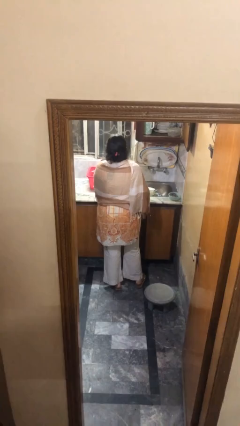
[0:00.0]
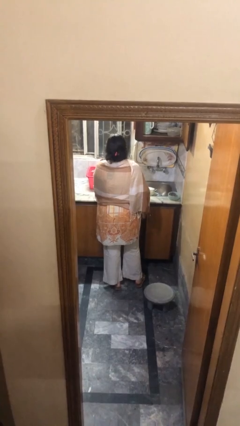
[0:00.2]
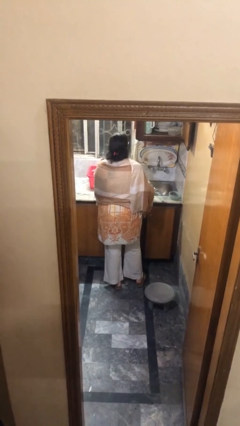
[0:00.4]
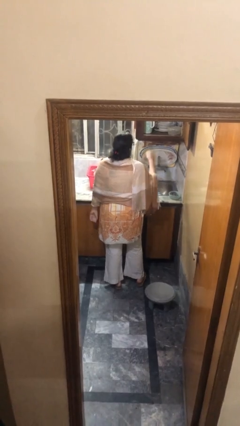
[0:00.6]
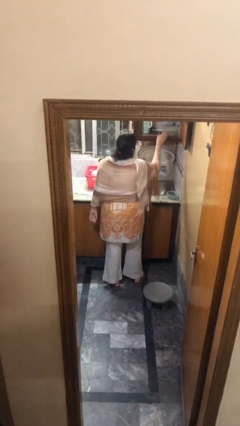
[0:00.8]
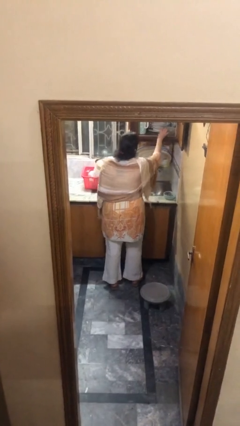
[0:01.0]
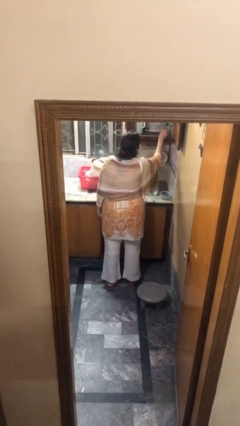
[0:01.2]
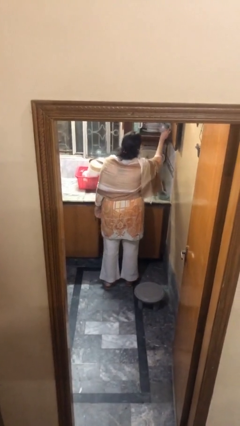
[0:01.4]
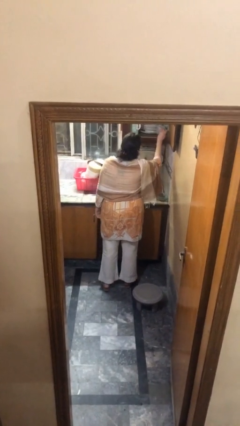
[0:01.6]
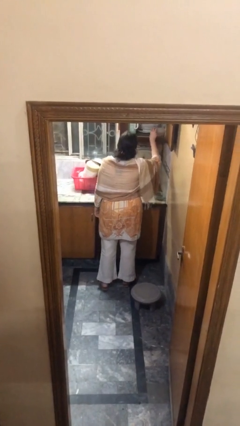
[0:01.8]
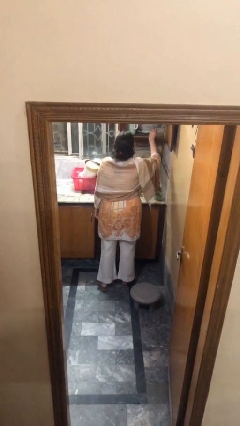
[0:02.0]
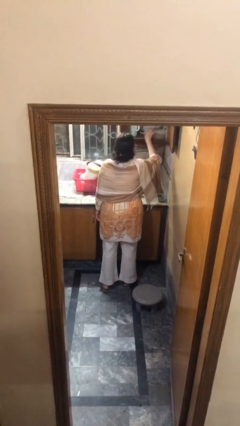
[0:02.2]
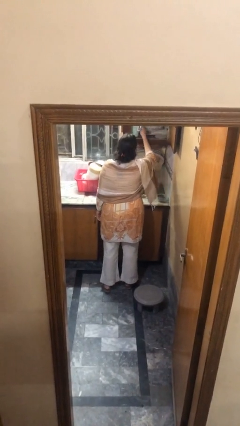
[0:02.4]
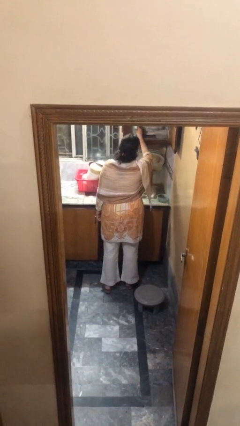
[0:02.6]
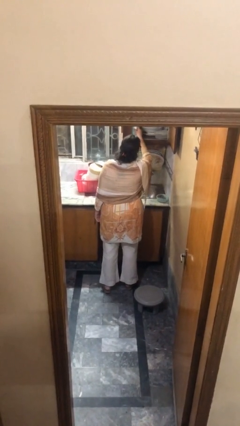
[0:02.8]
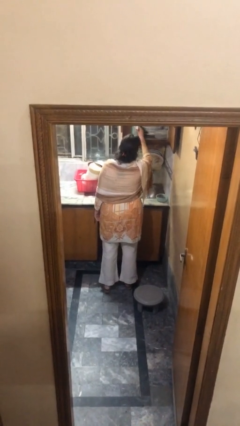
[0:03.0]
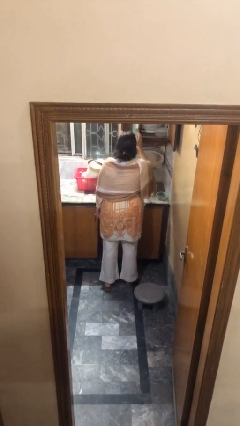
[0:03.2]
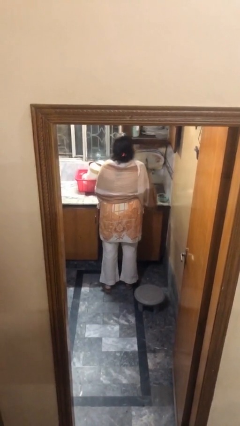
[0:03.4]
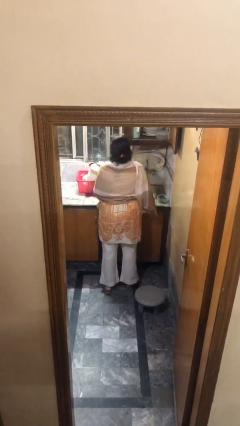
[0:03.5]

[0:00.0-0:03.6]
person searches in kitchen drawer

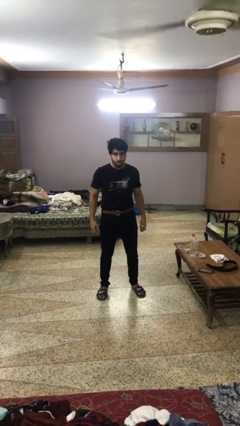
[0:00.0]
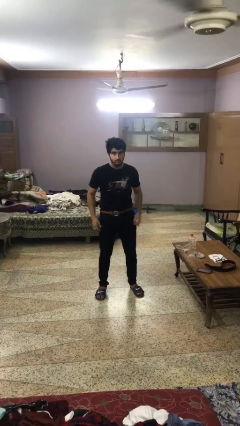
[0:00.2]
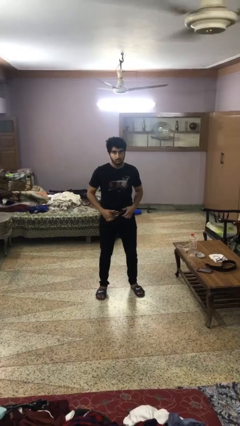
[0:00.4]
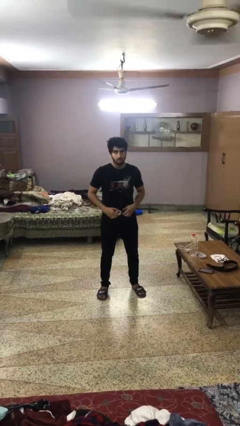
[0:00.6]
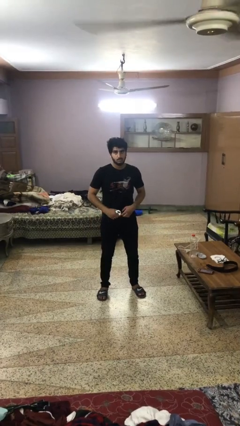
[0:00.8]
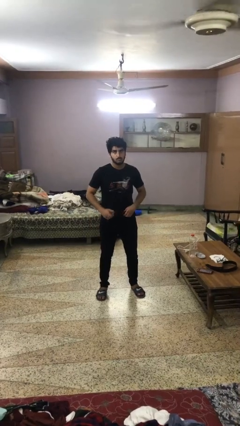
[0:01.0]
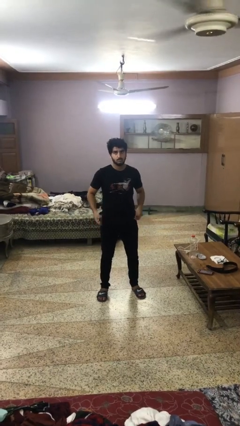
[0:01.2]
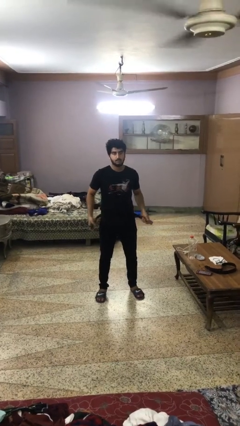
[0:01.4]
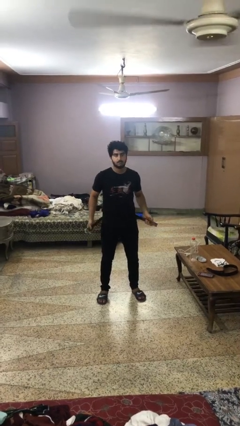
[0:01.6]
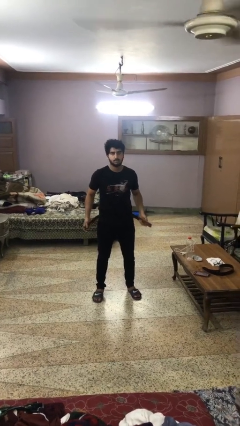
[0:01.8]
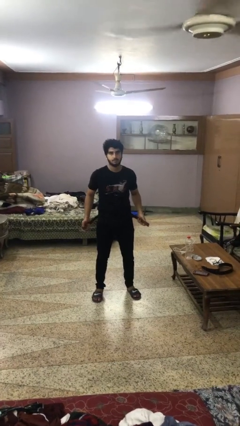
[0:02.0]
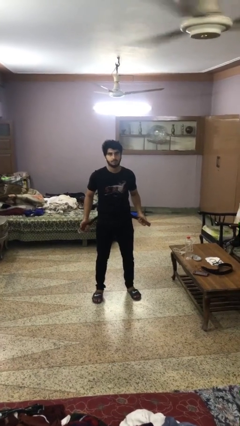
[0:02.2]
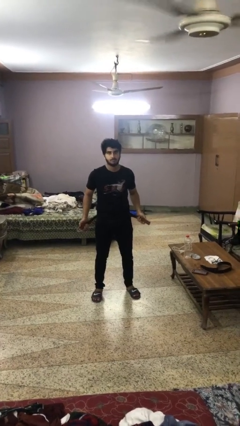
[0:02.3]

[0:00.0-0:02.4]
person takes off belt

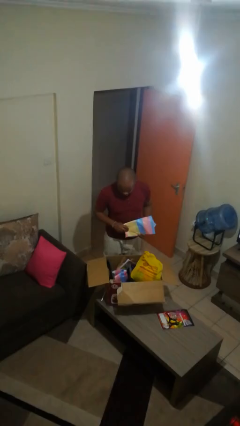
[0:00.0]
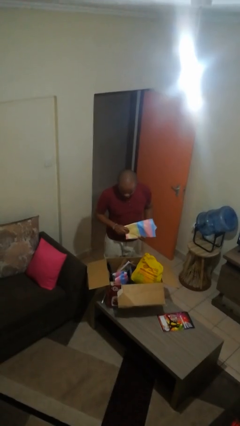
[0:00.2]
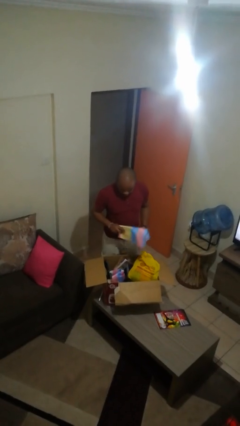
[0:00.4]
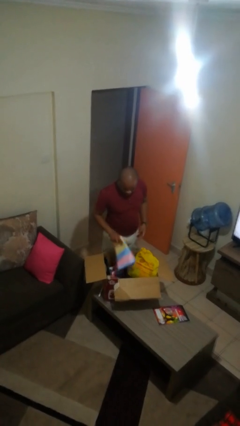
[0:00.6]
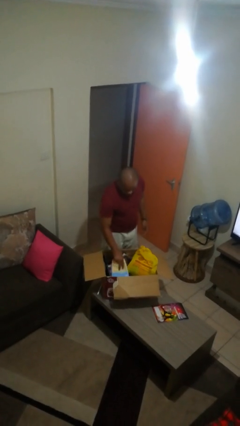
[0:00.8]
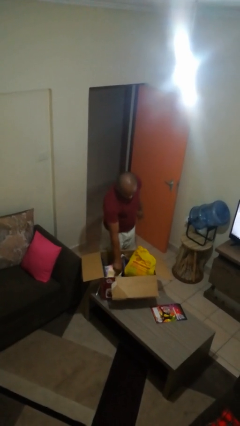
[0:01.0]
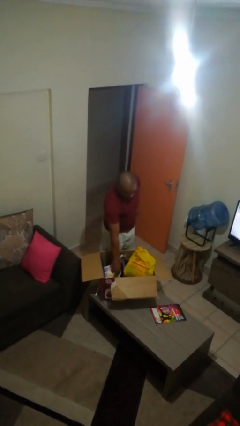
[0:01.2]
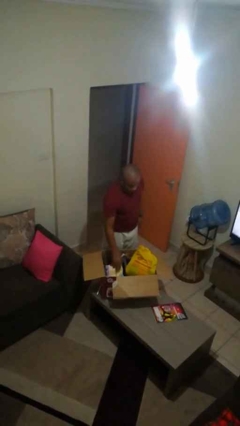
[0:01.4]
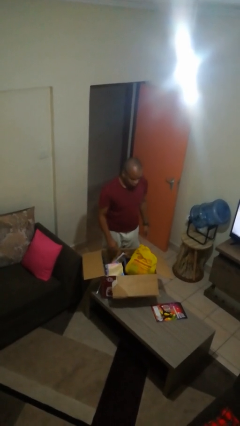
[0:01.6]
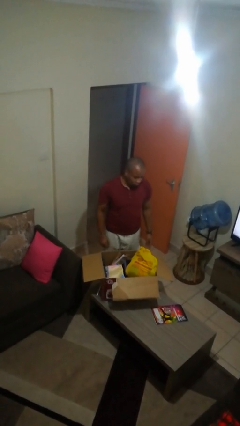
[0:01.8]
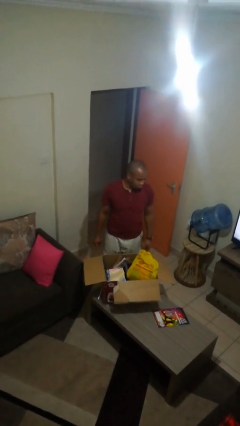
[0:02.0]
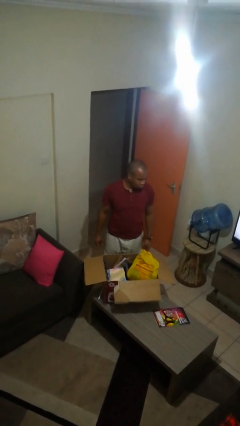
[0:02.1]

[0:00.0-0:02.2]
person puts object into box

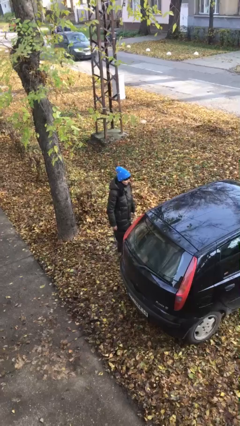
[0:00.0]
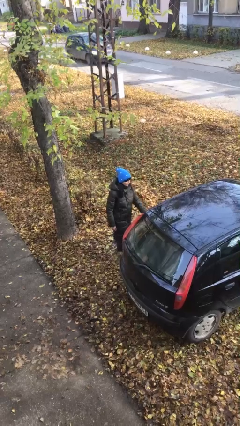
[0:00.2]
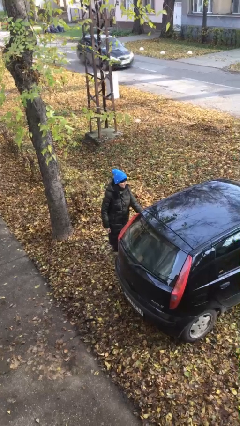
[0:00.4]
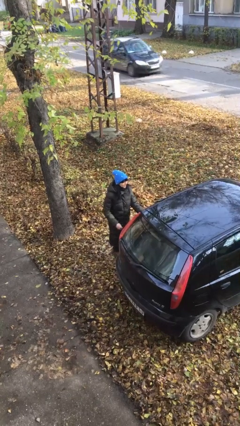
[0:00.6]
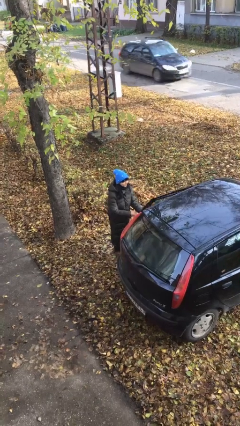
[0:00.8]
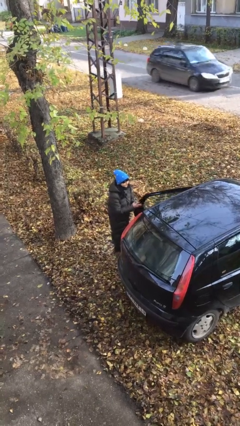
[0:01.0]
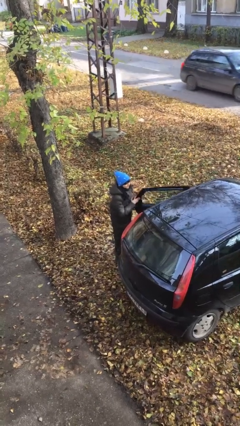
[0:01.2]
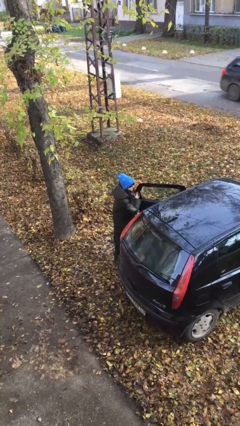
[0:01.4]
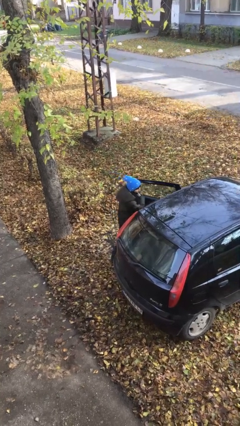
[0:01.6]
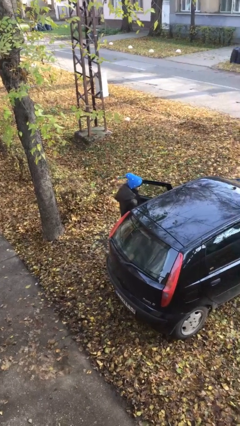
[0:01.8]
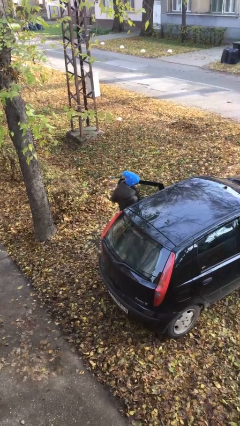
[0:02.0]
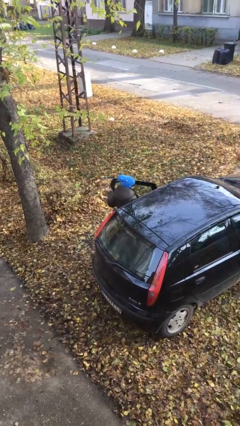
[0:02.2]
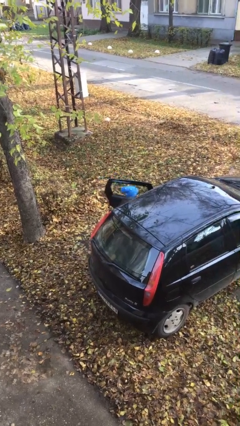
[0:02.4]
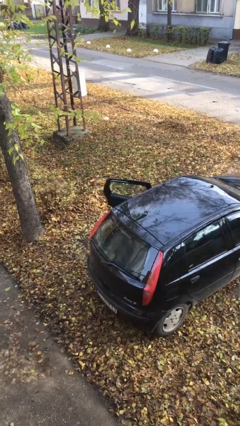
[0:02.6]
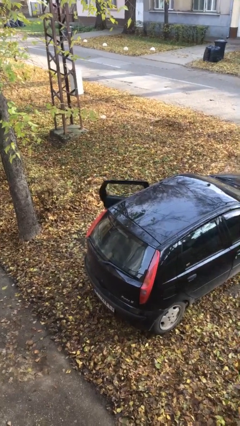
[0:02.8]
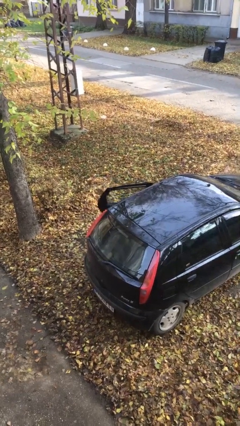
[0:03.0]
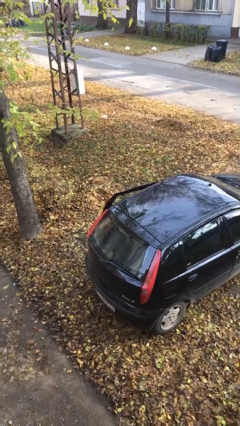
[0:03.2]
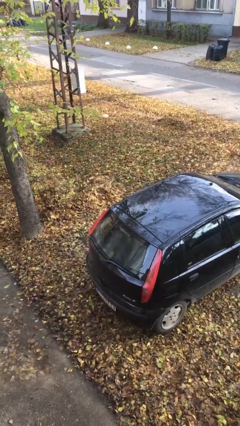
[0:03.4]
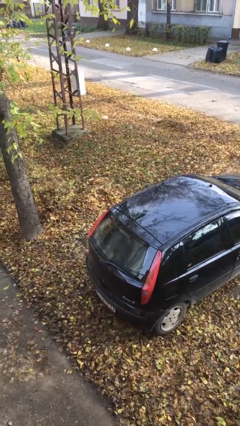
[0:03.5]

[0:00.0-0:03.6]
person enters car

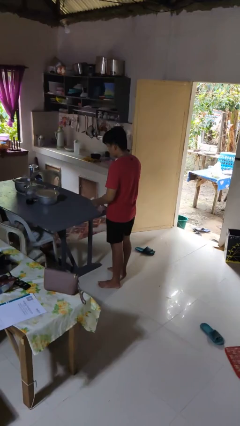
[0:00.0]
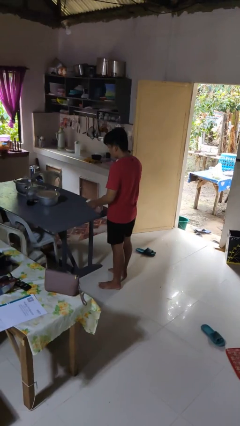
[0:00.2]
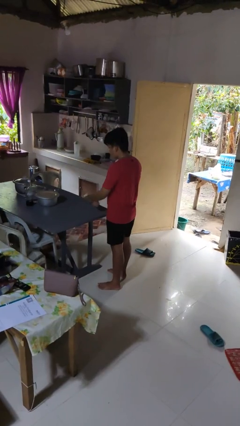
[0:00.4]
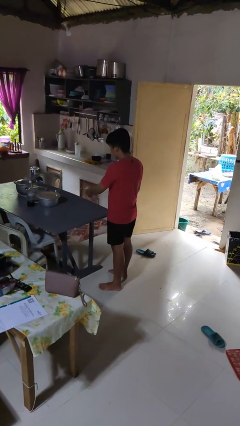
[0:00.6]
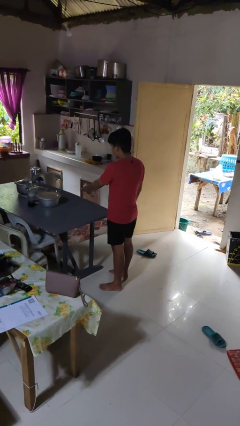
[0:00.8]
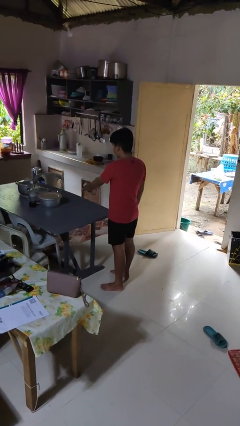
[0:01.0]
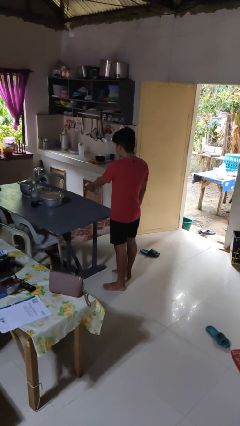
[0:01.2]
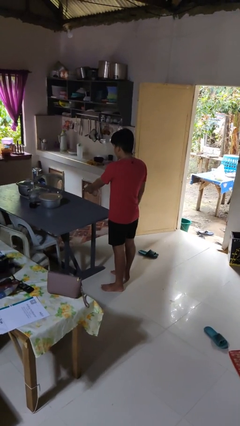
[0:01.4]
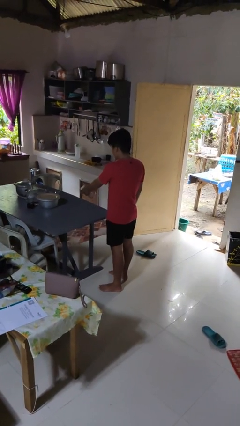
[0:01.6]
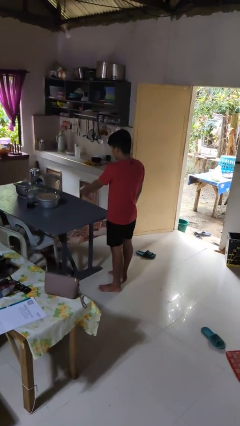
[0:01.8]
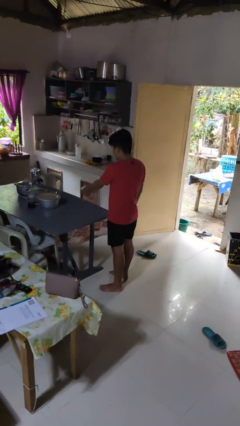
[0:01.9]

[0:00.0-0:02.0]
person sprays from bottle

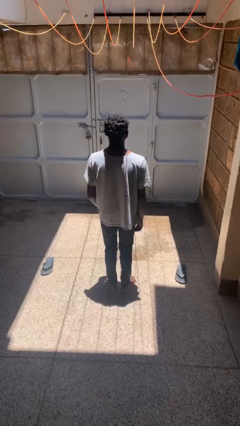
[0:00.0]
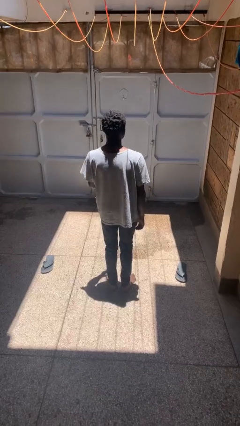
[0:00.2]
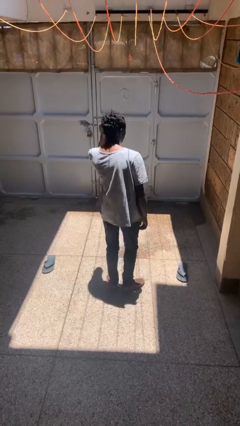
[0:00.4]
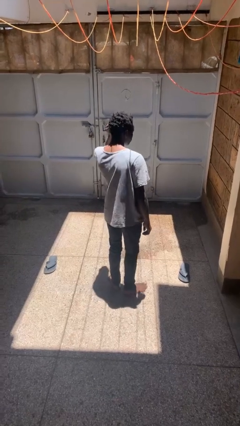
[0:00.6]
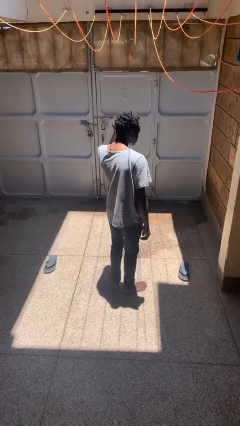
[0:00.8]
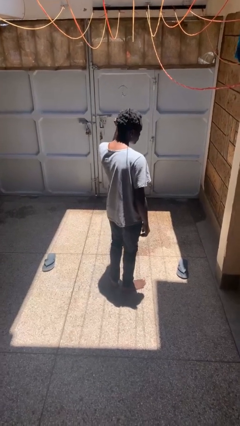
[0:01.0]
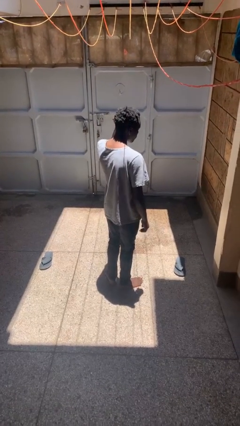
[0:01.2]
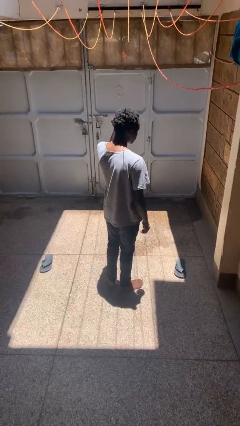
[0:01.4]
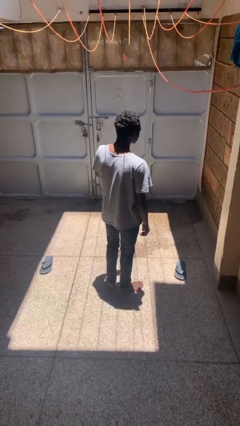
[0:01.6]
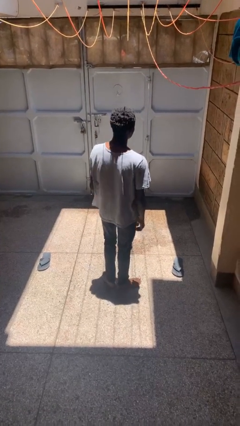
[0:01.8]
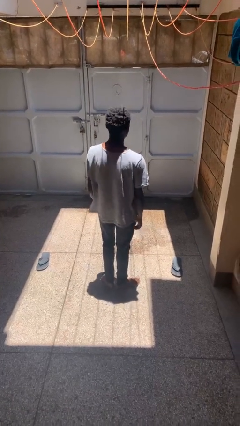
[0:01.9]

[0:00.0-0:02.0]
person touches earlobe

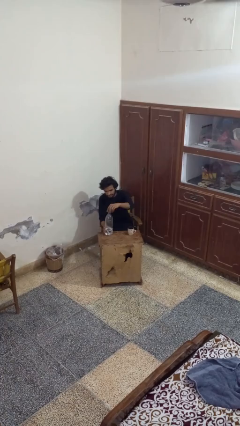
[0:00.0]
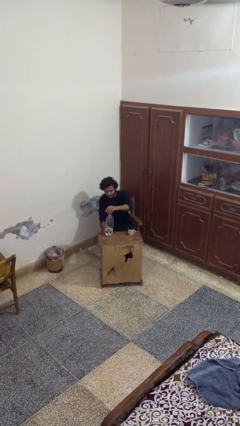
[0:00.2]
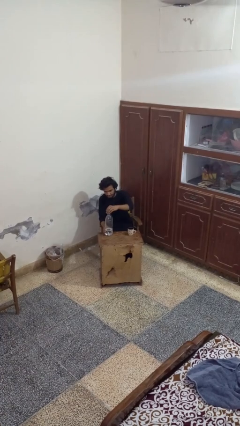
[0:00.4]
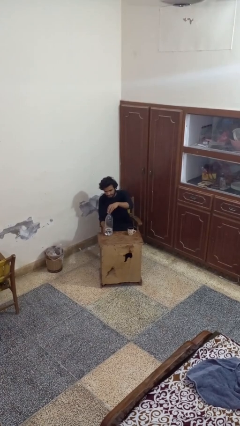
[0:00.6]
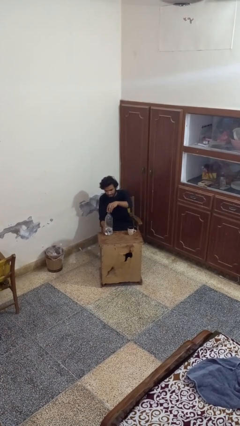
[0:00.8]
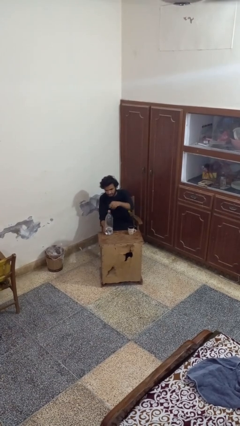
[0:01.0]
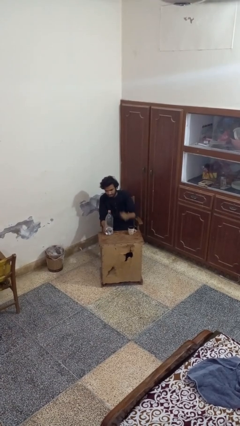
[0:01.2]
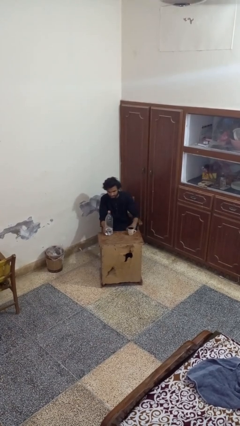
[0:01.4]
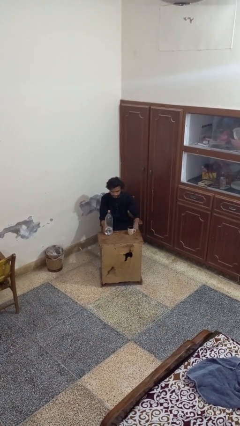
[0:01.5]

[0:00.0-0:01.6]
person unscrews lid from bottle
